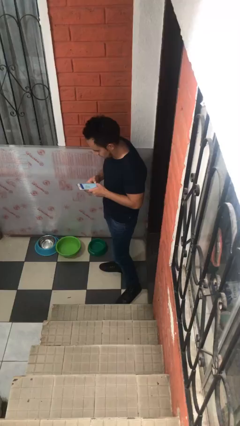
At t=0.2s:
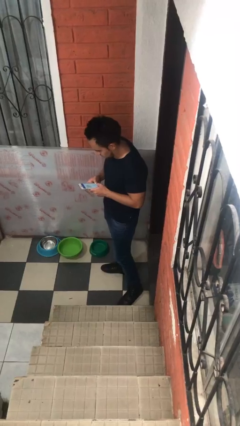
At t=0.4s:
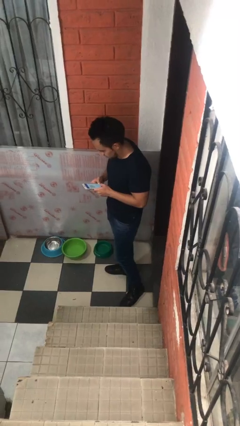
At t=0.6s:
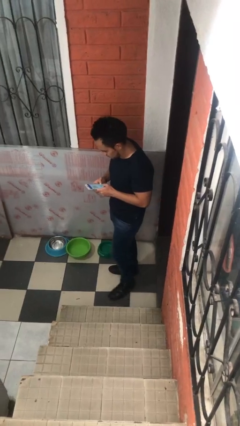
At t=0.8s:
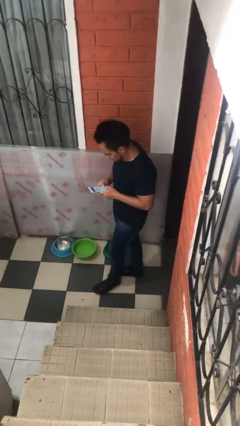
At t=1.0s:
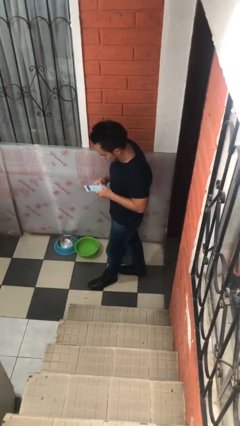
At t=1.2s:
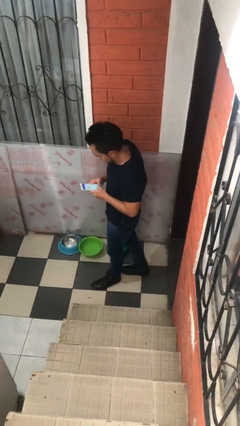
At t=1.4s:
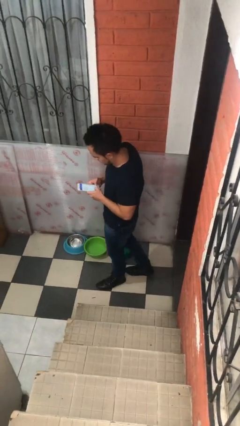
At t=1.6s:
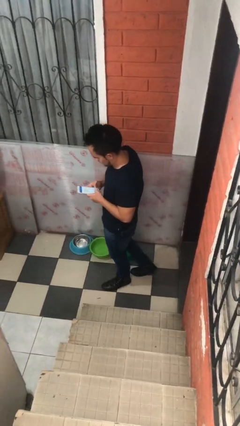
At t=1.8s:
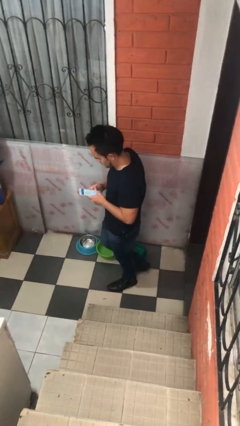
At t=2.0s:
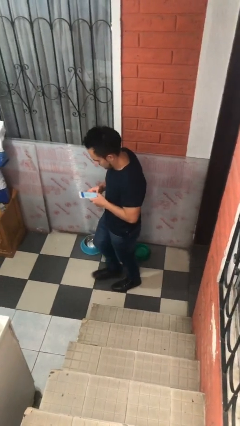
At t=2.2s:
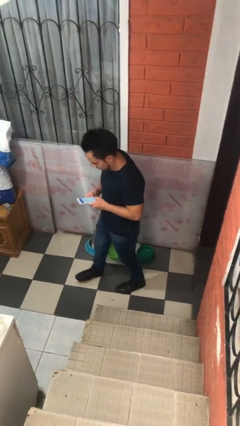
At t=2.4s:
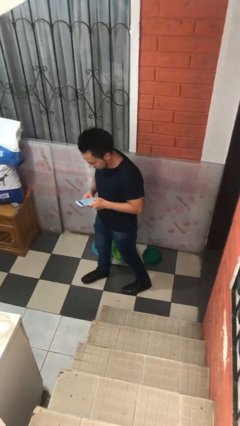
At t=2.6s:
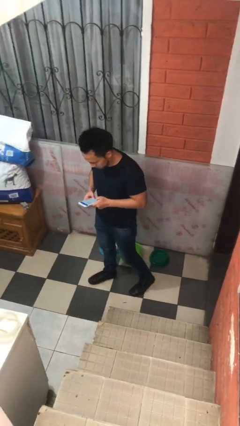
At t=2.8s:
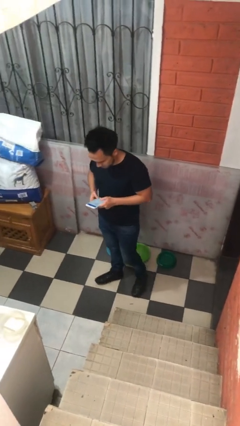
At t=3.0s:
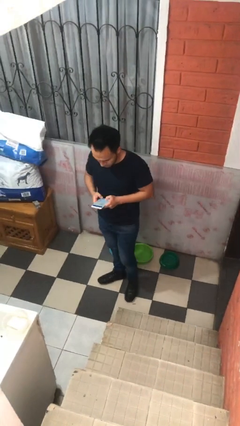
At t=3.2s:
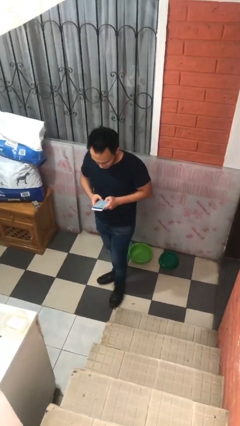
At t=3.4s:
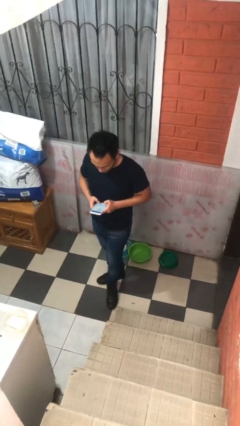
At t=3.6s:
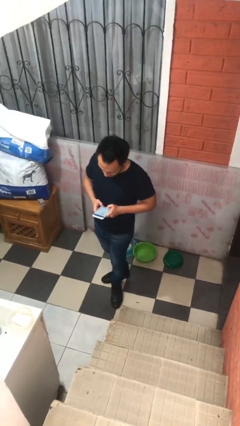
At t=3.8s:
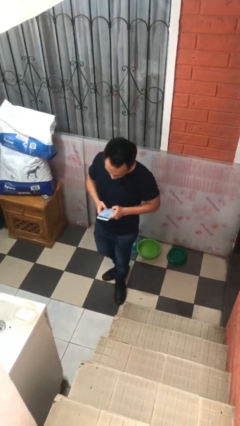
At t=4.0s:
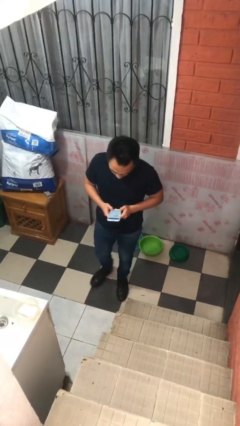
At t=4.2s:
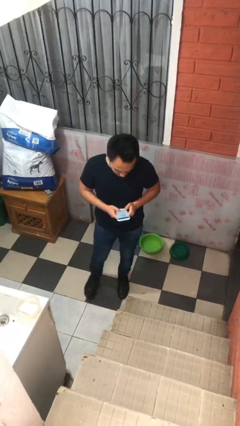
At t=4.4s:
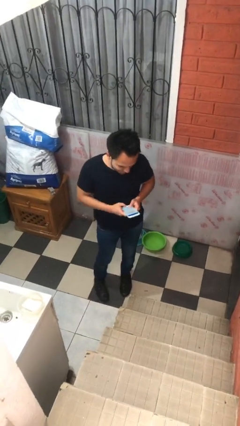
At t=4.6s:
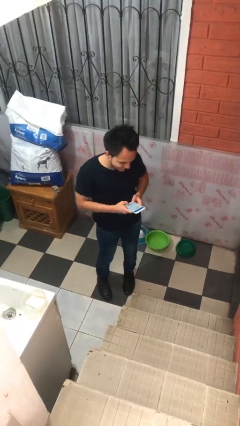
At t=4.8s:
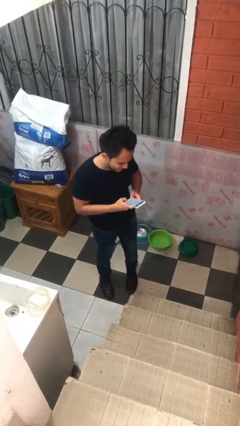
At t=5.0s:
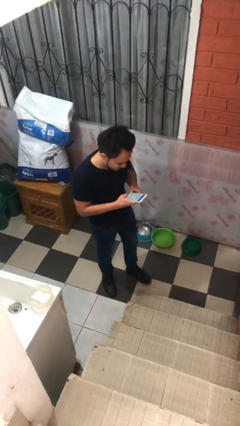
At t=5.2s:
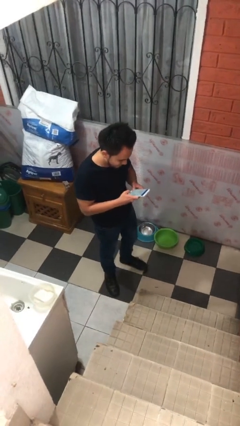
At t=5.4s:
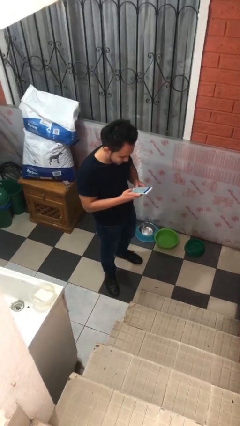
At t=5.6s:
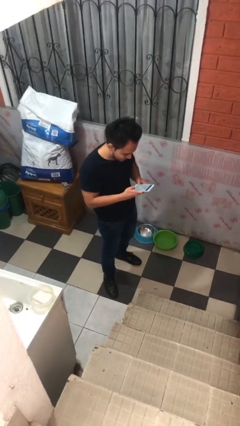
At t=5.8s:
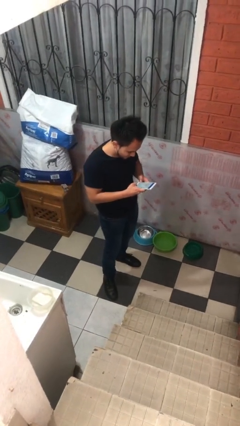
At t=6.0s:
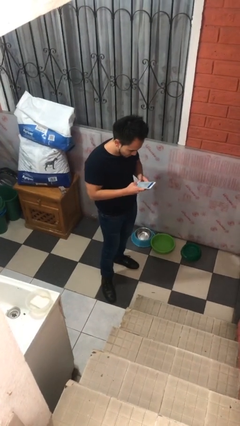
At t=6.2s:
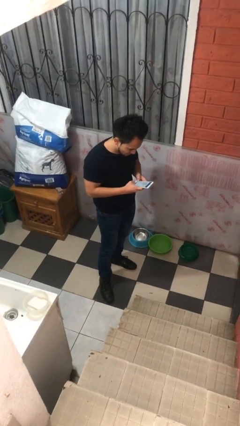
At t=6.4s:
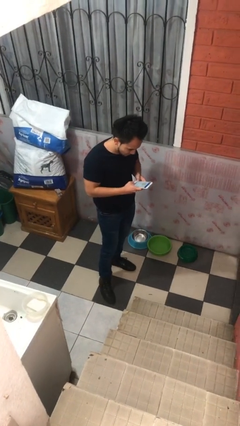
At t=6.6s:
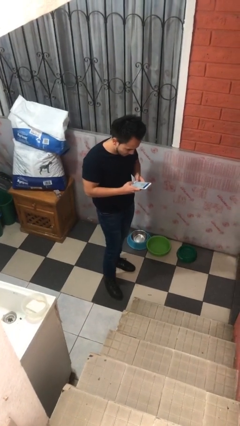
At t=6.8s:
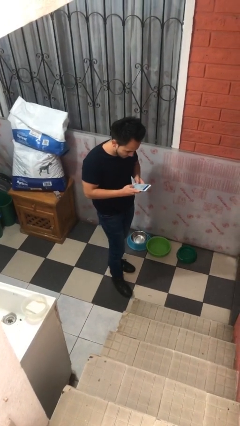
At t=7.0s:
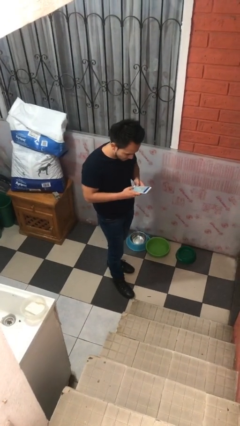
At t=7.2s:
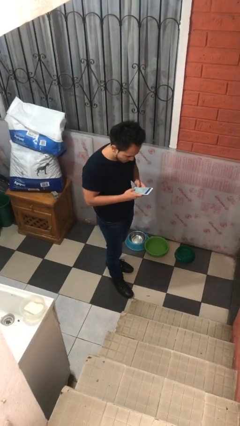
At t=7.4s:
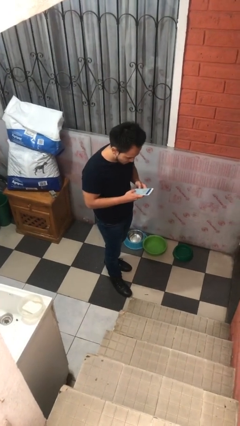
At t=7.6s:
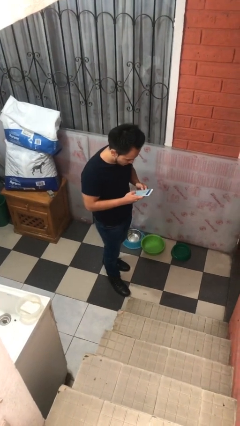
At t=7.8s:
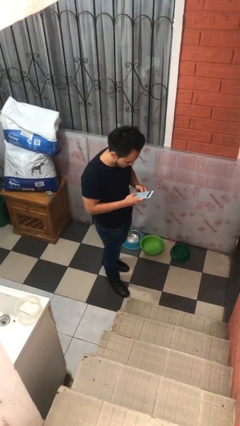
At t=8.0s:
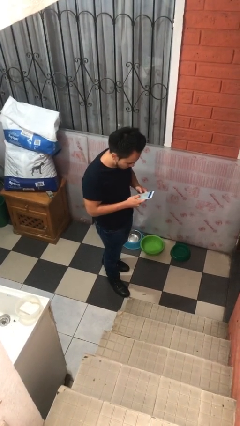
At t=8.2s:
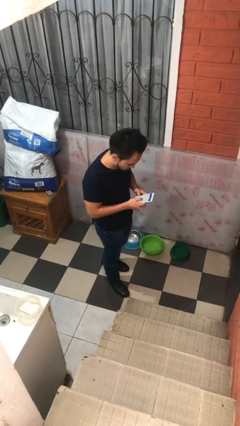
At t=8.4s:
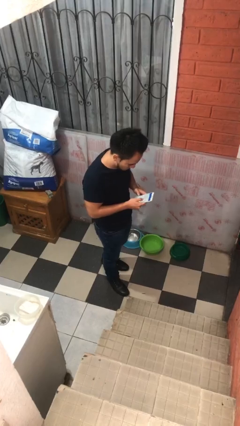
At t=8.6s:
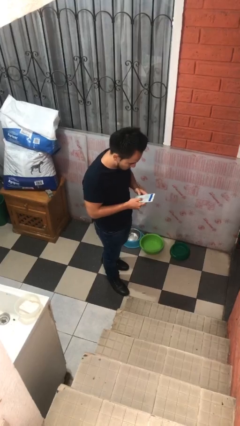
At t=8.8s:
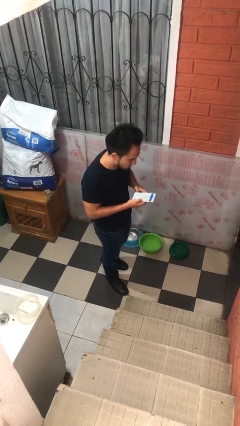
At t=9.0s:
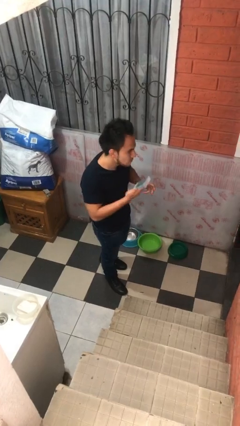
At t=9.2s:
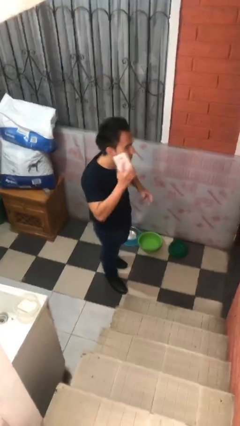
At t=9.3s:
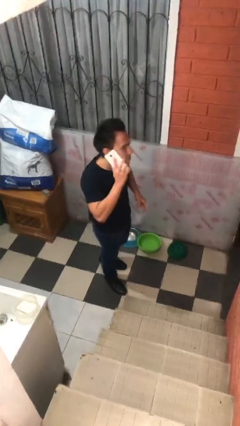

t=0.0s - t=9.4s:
person texts on phone

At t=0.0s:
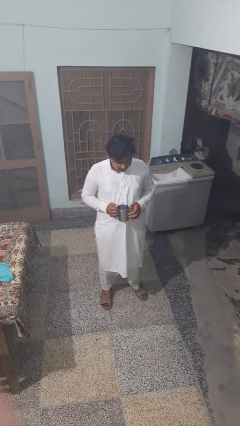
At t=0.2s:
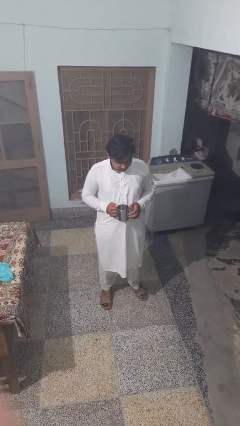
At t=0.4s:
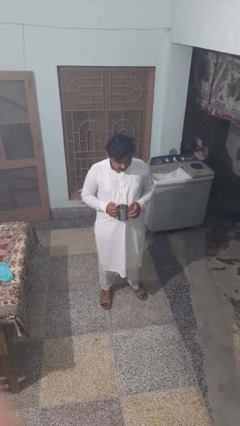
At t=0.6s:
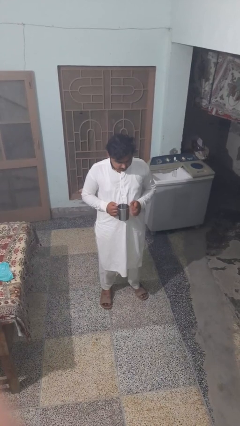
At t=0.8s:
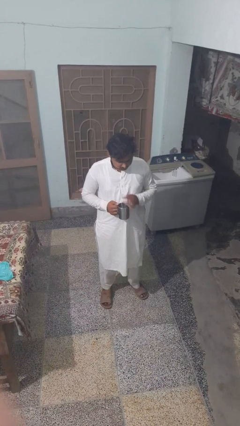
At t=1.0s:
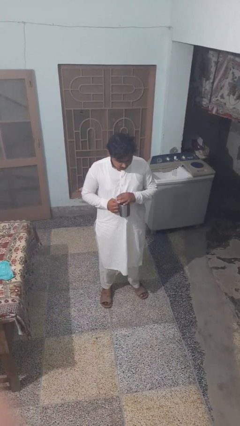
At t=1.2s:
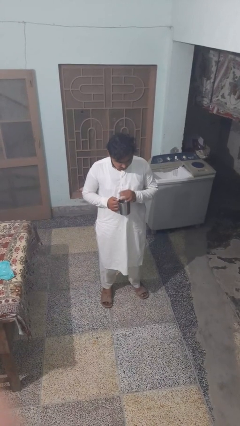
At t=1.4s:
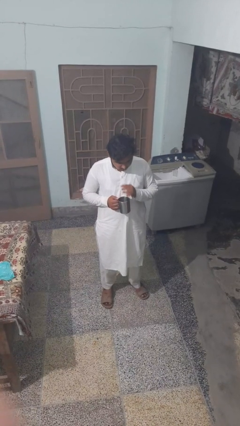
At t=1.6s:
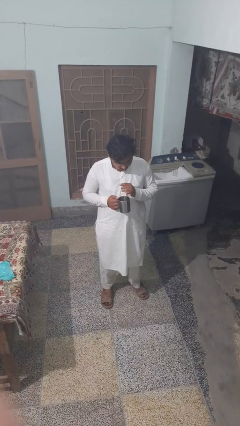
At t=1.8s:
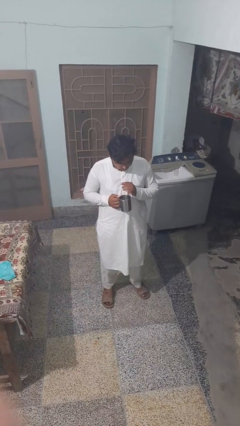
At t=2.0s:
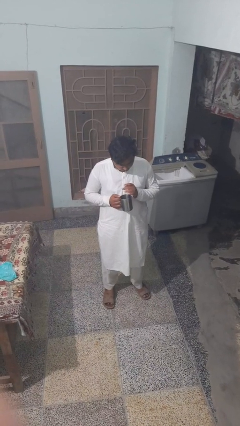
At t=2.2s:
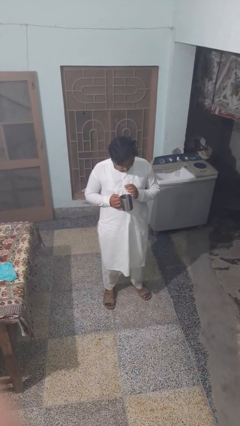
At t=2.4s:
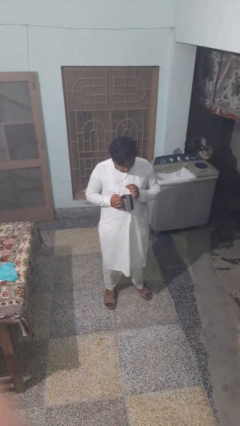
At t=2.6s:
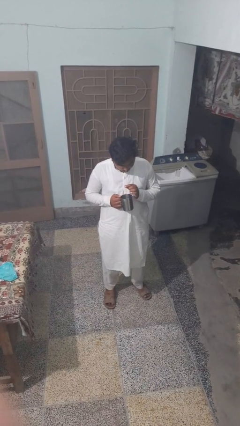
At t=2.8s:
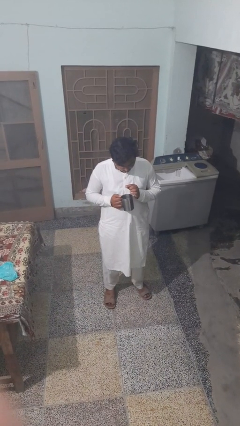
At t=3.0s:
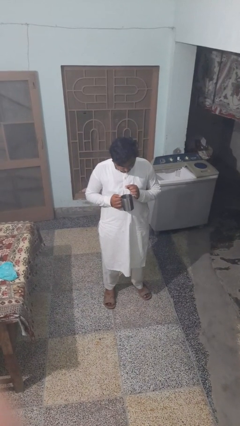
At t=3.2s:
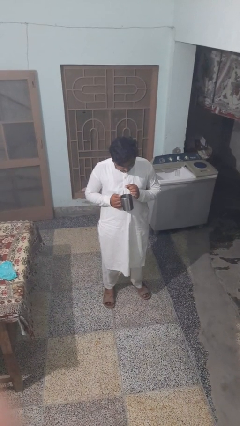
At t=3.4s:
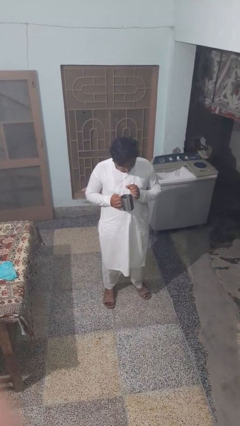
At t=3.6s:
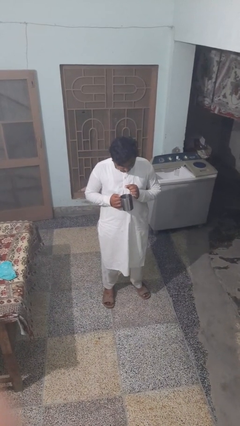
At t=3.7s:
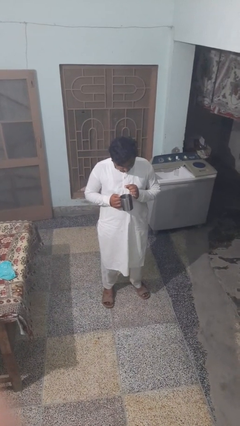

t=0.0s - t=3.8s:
person drinks from straw

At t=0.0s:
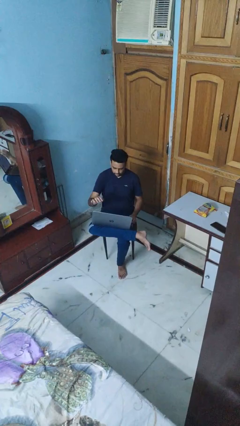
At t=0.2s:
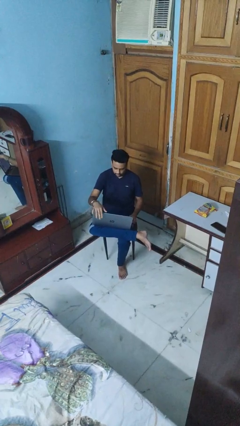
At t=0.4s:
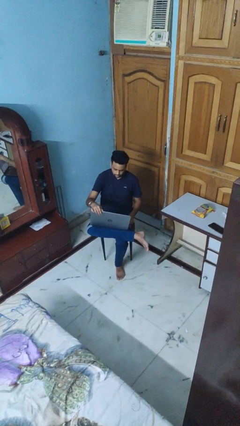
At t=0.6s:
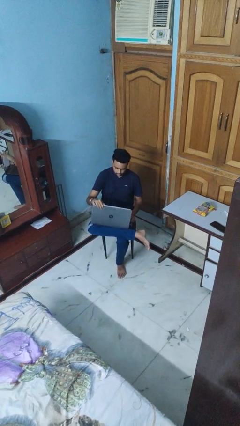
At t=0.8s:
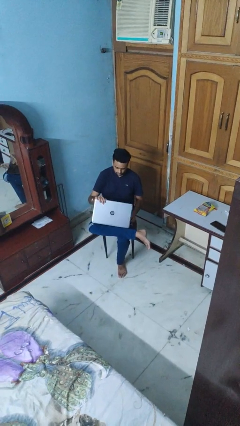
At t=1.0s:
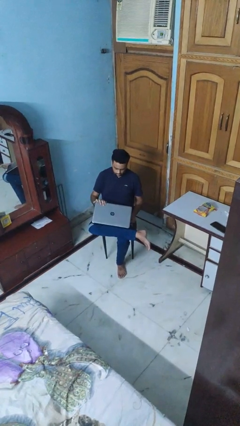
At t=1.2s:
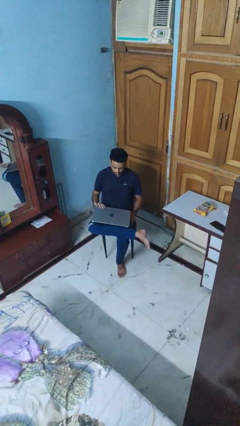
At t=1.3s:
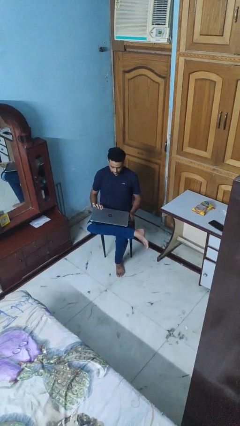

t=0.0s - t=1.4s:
person closes laptop

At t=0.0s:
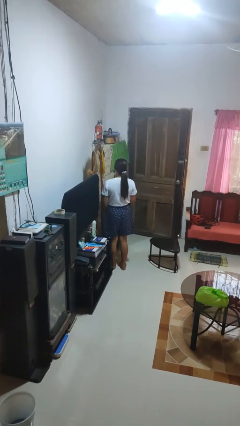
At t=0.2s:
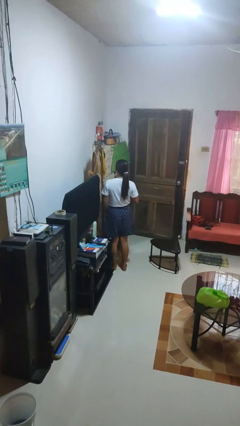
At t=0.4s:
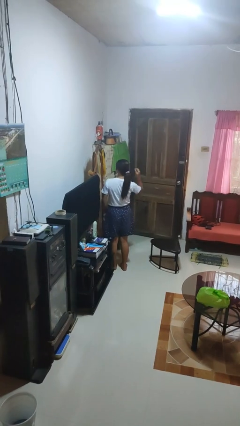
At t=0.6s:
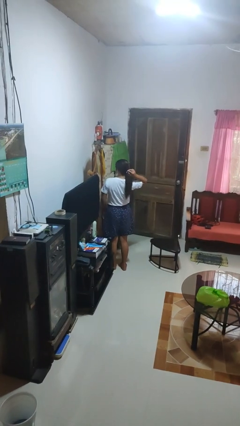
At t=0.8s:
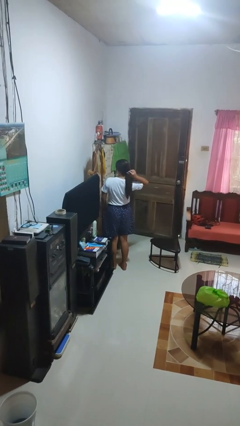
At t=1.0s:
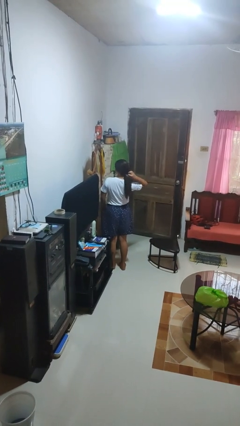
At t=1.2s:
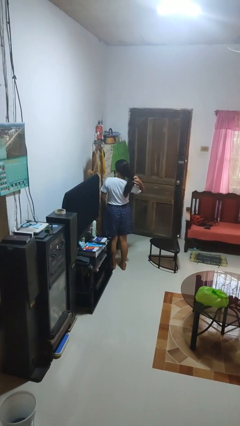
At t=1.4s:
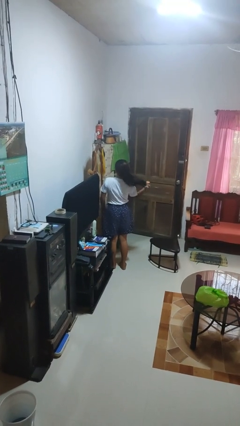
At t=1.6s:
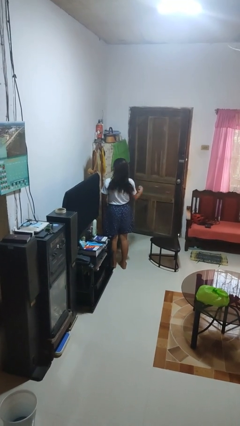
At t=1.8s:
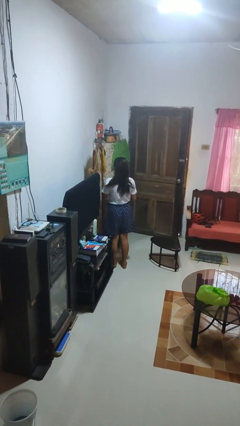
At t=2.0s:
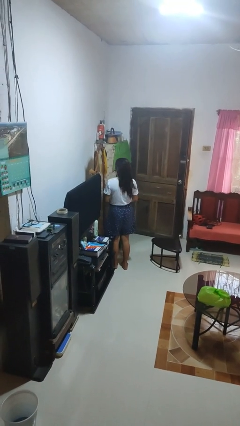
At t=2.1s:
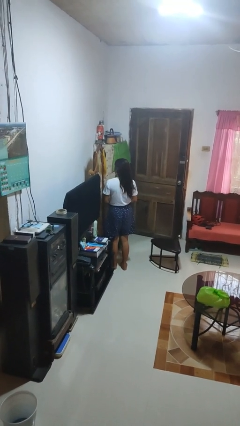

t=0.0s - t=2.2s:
person takes off hairtie

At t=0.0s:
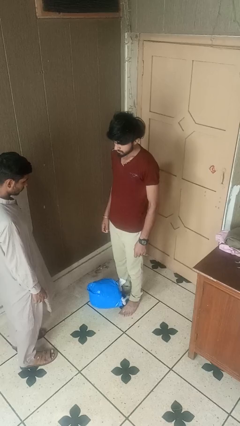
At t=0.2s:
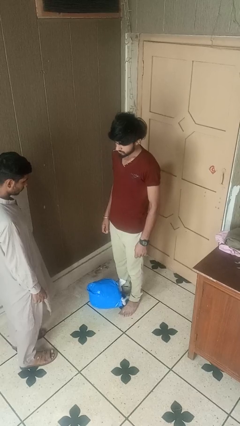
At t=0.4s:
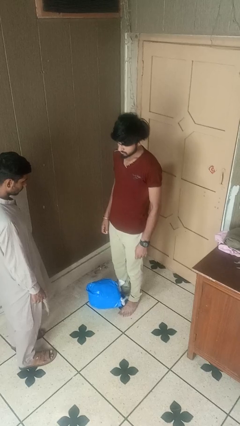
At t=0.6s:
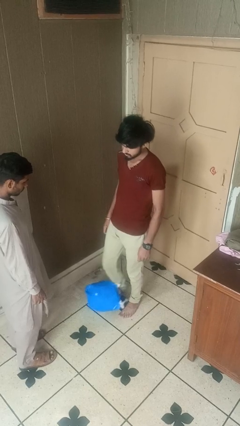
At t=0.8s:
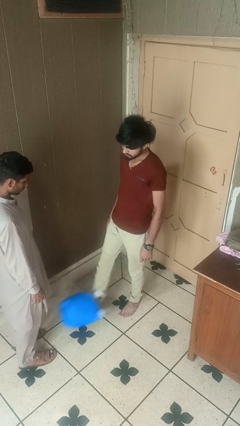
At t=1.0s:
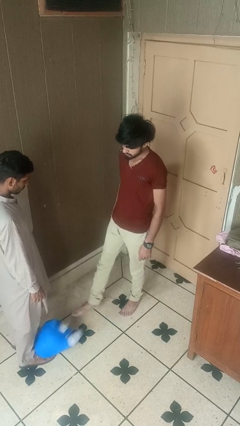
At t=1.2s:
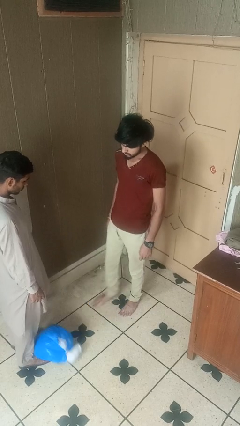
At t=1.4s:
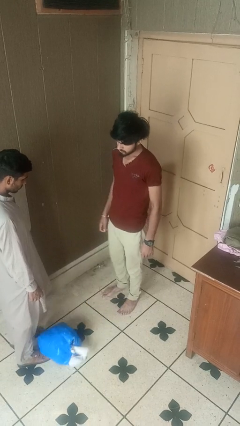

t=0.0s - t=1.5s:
person kicks object to person
